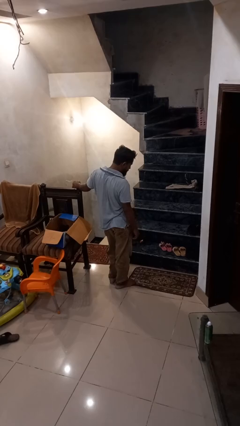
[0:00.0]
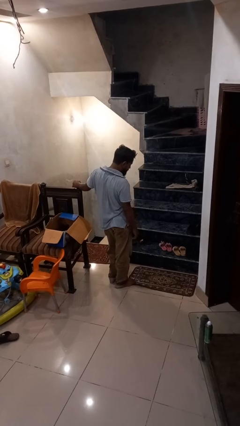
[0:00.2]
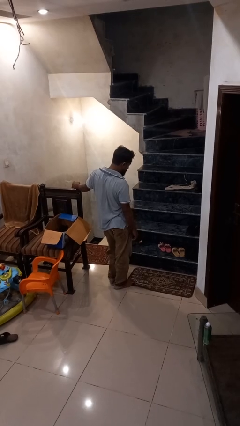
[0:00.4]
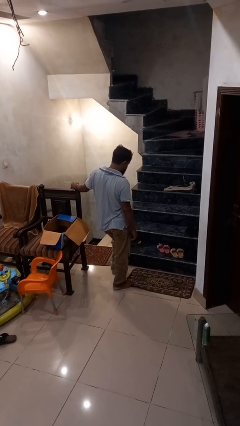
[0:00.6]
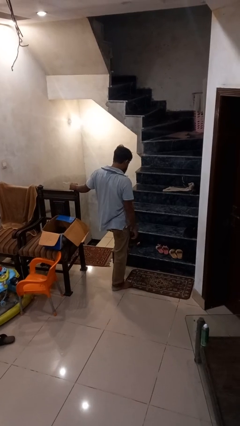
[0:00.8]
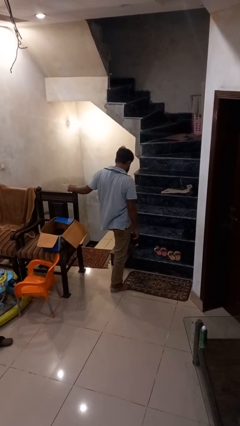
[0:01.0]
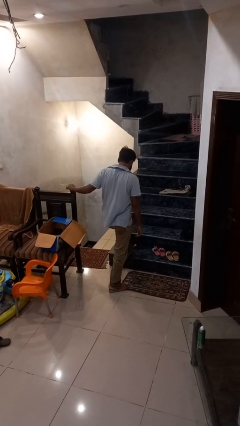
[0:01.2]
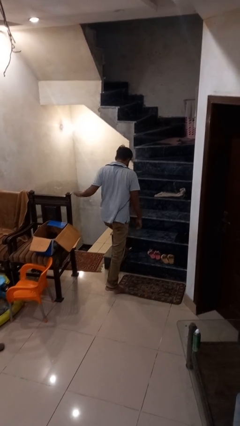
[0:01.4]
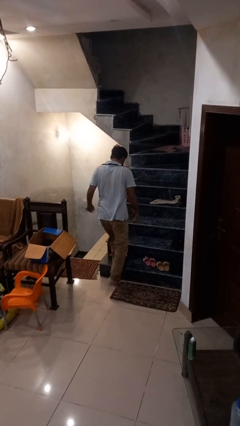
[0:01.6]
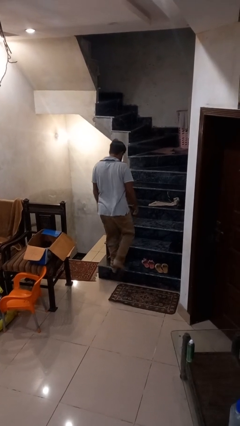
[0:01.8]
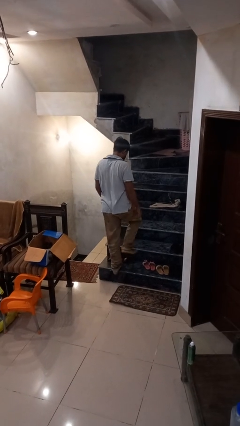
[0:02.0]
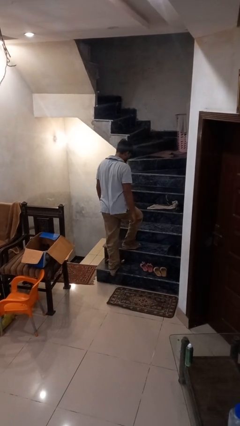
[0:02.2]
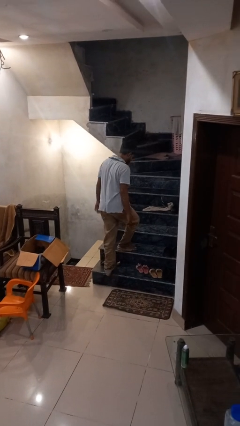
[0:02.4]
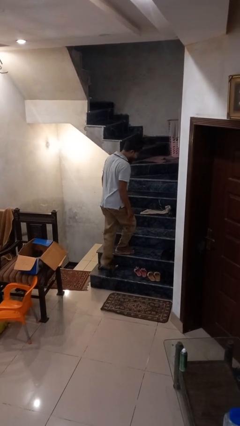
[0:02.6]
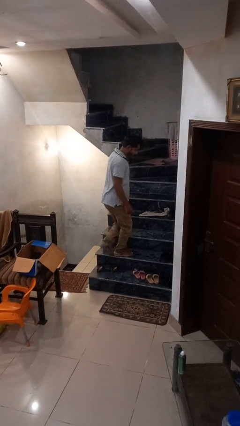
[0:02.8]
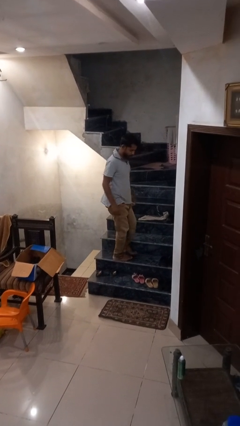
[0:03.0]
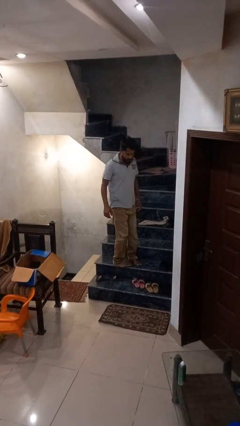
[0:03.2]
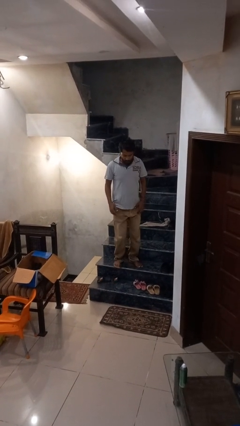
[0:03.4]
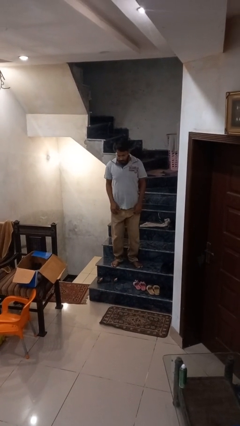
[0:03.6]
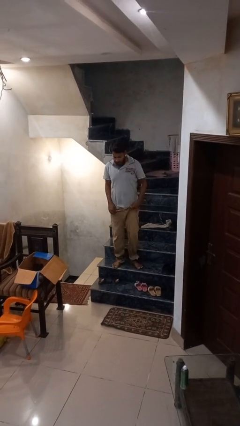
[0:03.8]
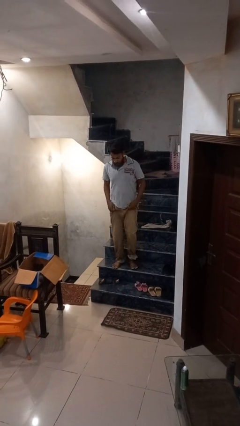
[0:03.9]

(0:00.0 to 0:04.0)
person climbs up stairs

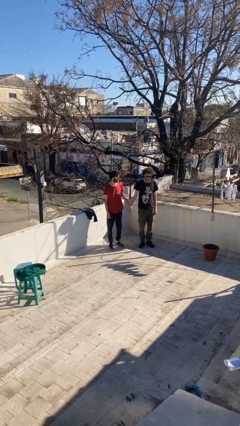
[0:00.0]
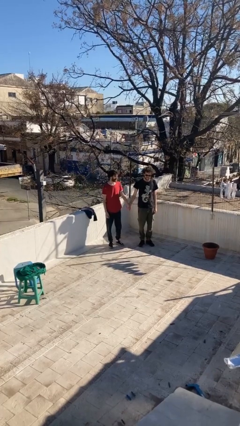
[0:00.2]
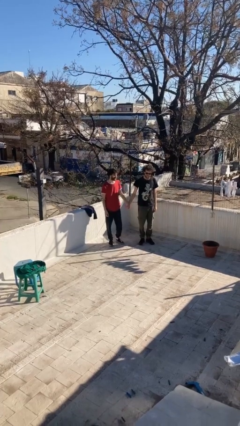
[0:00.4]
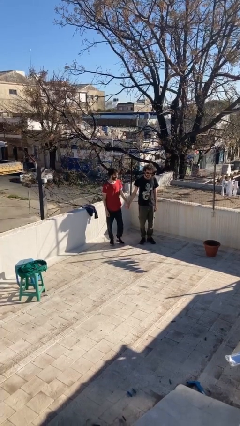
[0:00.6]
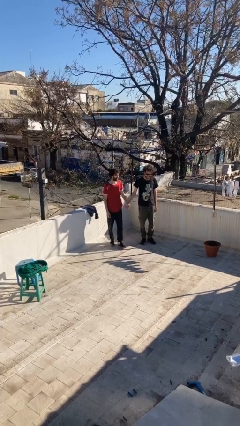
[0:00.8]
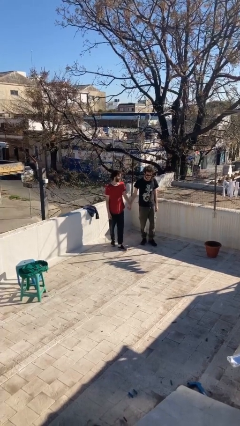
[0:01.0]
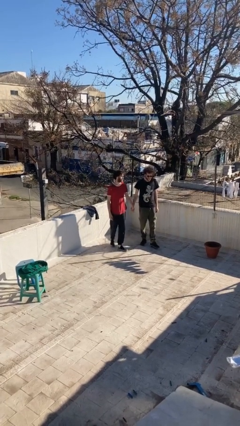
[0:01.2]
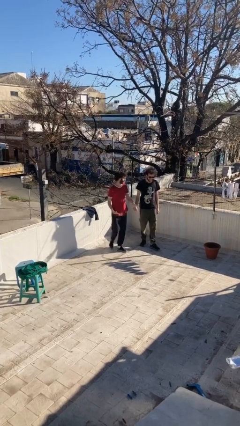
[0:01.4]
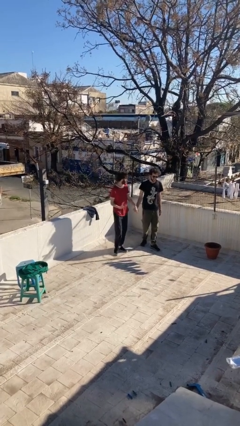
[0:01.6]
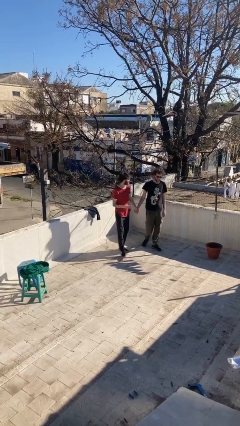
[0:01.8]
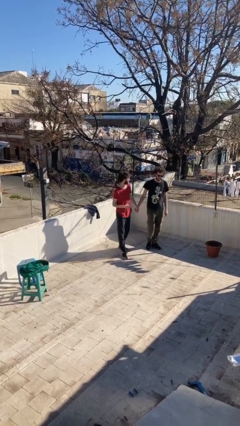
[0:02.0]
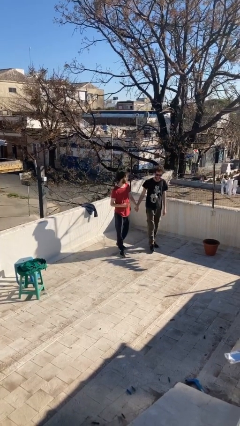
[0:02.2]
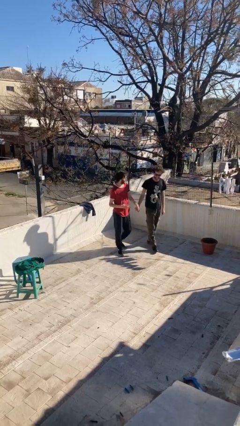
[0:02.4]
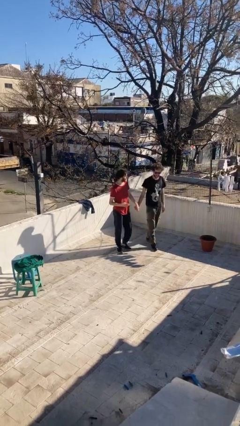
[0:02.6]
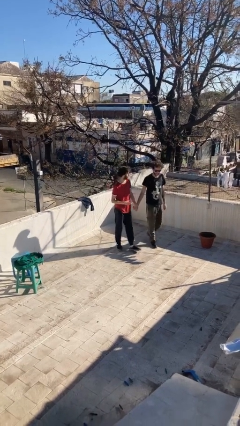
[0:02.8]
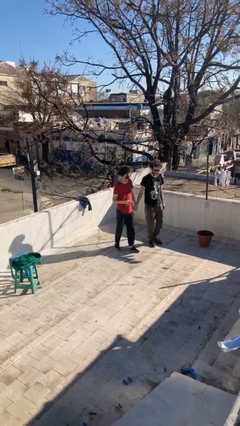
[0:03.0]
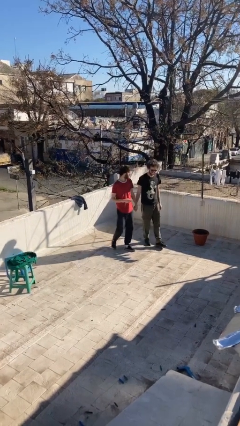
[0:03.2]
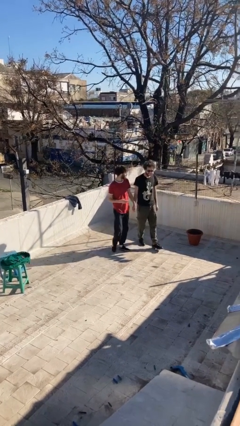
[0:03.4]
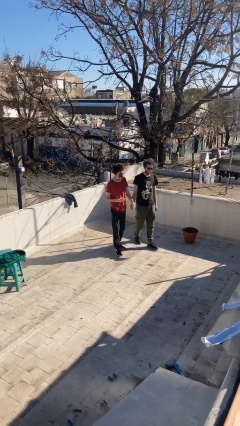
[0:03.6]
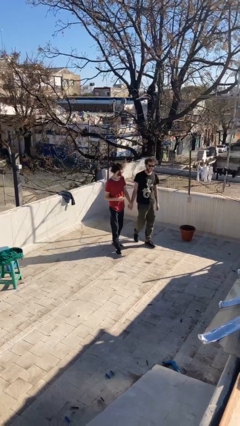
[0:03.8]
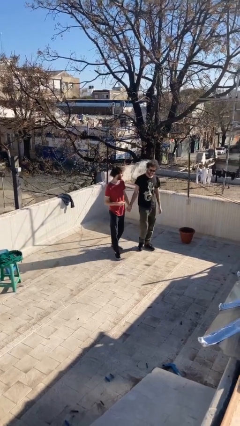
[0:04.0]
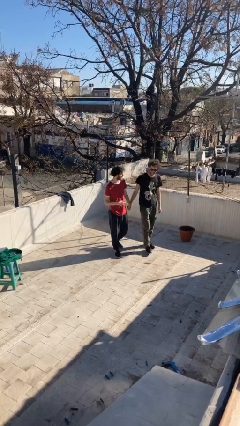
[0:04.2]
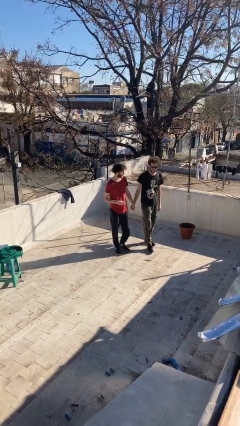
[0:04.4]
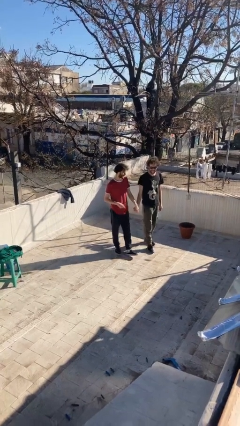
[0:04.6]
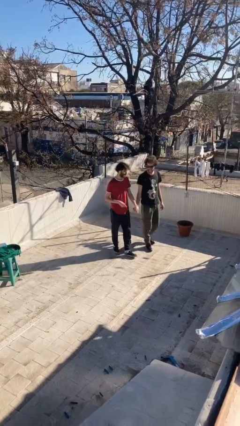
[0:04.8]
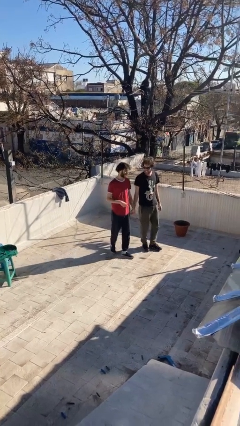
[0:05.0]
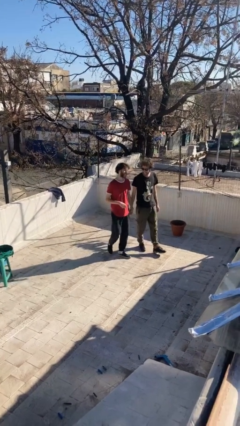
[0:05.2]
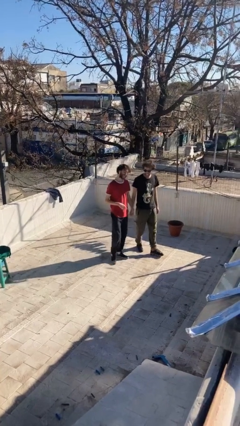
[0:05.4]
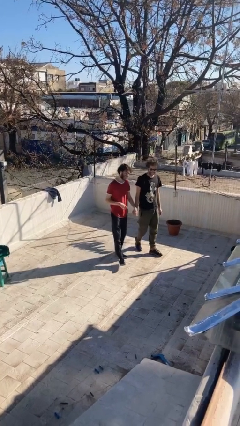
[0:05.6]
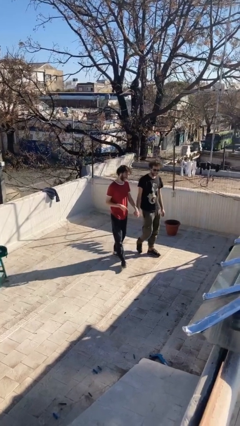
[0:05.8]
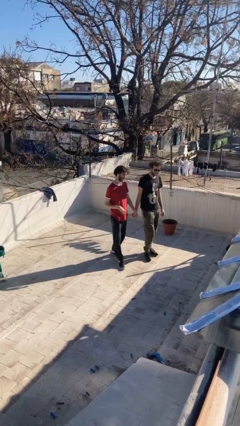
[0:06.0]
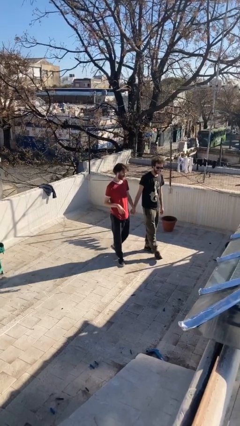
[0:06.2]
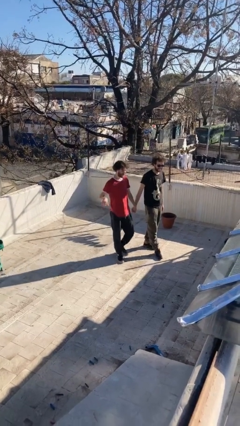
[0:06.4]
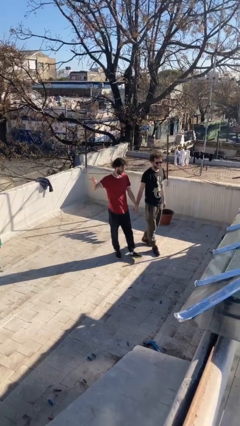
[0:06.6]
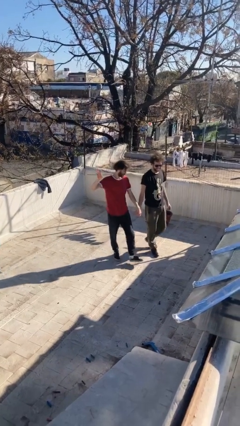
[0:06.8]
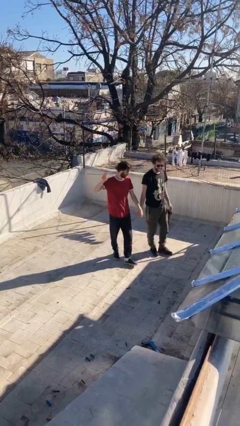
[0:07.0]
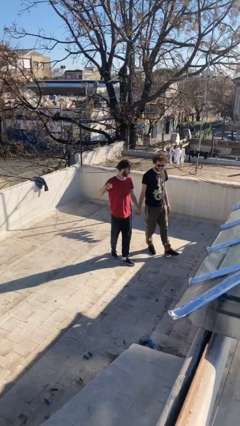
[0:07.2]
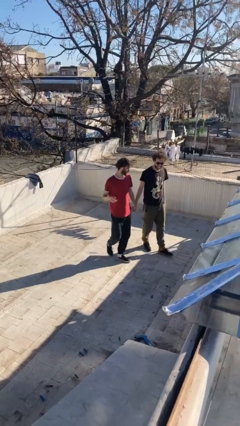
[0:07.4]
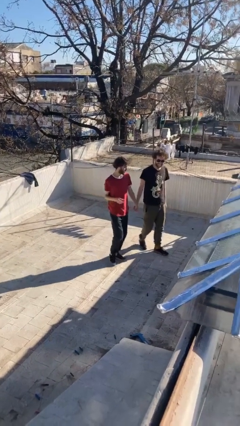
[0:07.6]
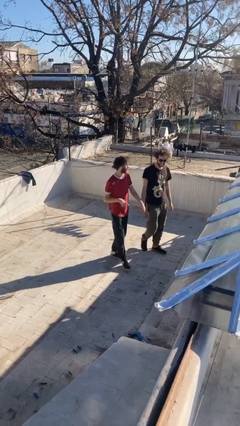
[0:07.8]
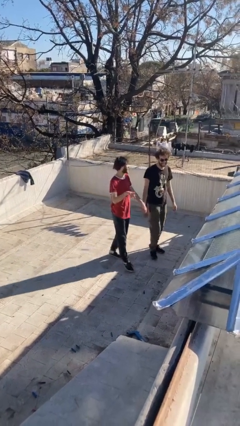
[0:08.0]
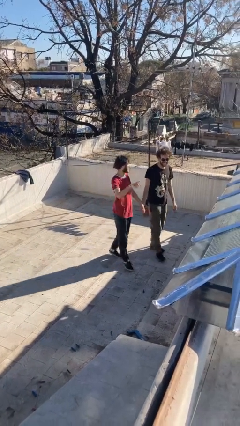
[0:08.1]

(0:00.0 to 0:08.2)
person holds hand

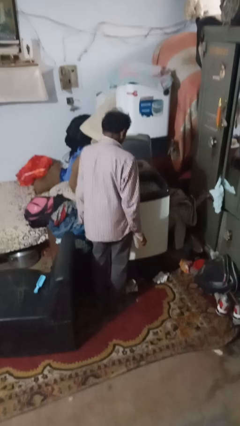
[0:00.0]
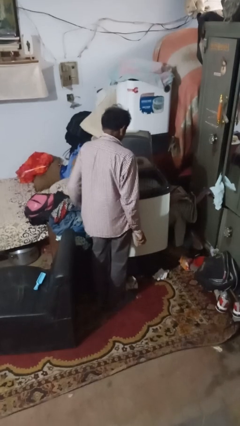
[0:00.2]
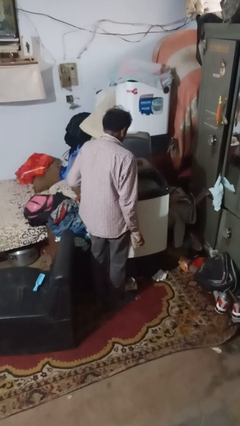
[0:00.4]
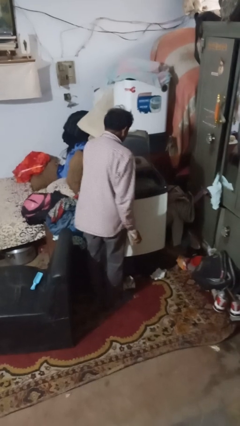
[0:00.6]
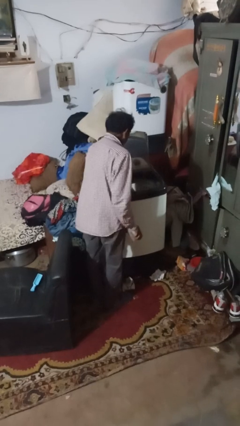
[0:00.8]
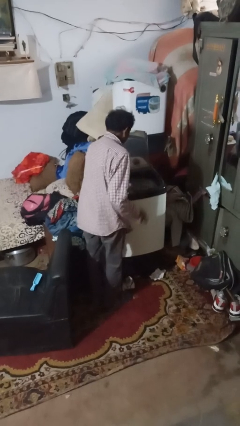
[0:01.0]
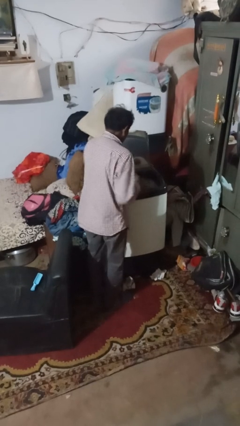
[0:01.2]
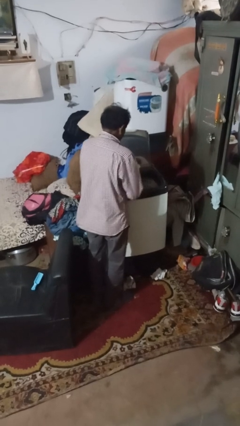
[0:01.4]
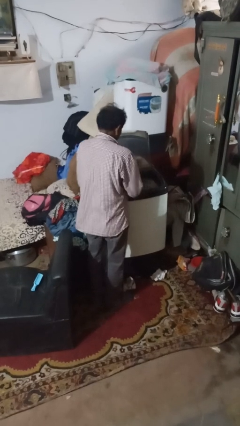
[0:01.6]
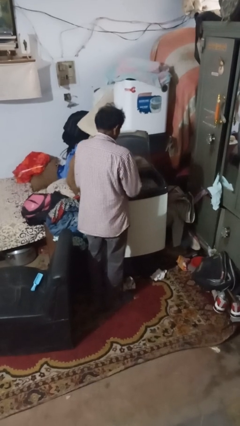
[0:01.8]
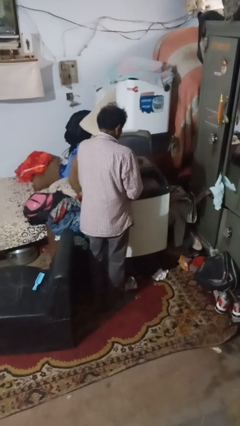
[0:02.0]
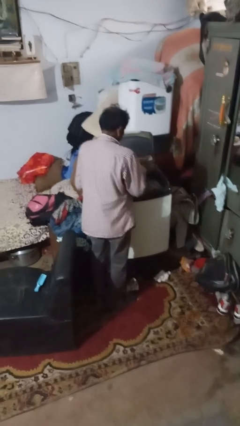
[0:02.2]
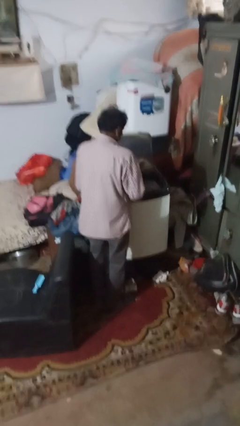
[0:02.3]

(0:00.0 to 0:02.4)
person cleans dryer lint trap

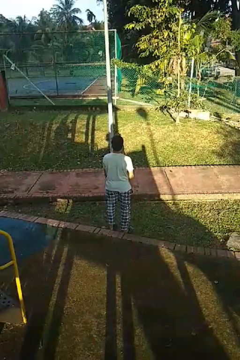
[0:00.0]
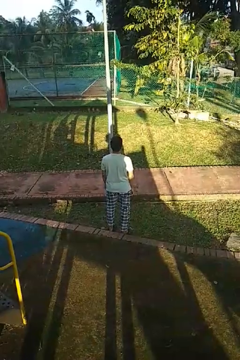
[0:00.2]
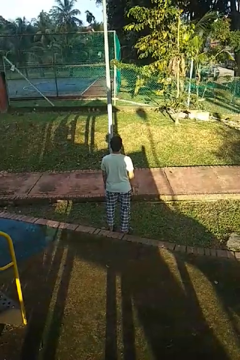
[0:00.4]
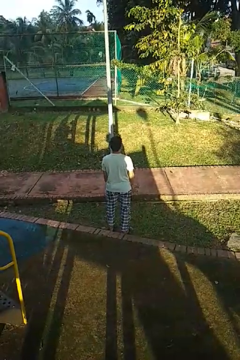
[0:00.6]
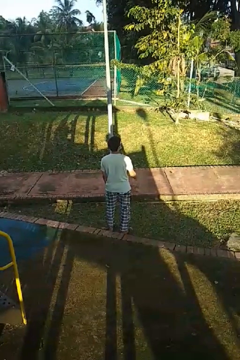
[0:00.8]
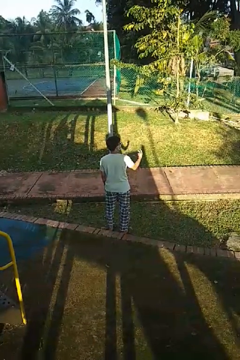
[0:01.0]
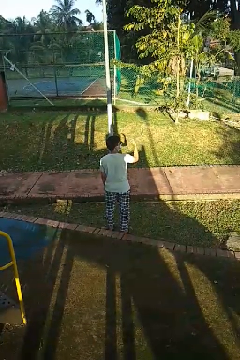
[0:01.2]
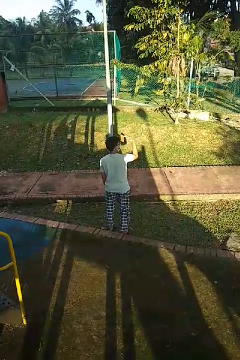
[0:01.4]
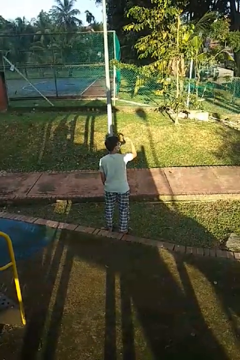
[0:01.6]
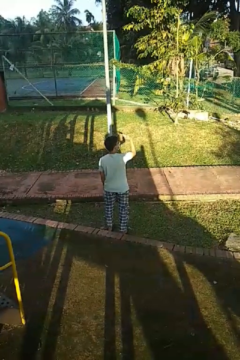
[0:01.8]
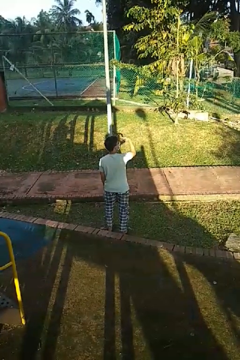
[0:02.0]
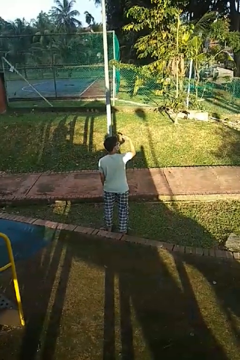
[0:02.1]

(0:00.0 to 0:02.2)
person gestures watch closely

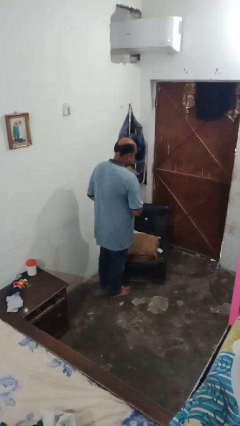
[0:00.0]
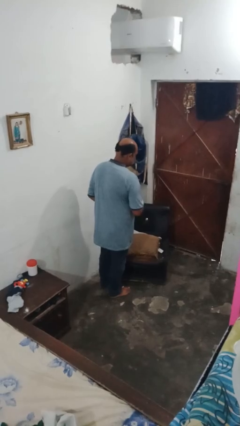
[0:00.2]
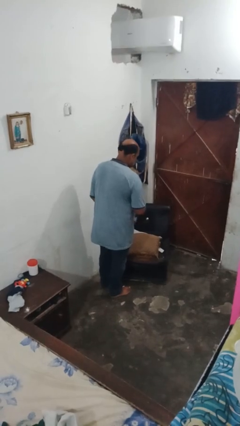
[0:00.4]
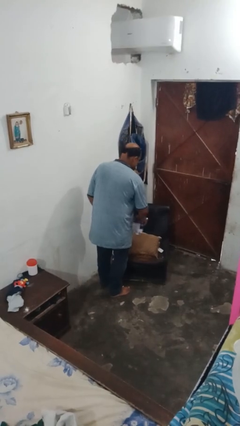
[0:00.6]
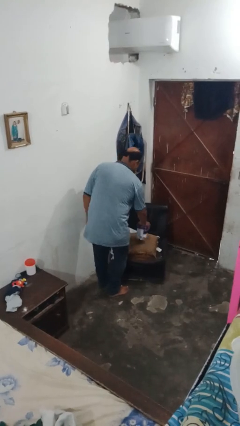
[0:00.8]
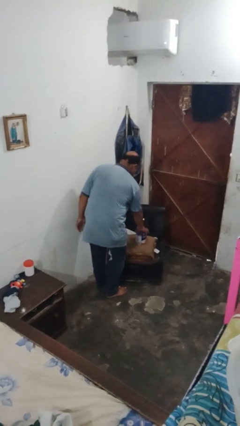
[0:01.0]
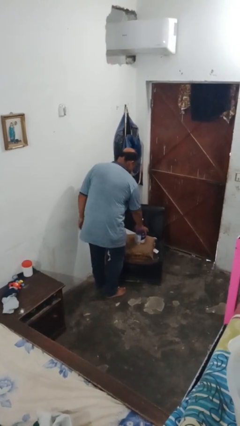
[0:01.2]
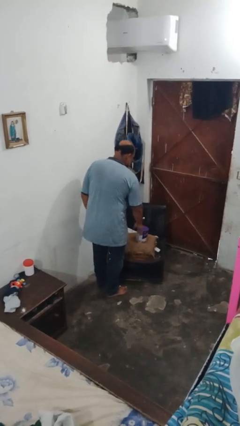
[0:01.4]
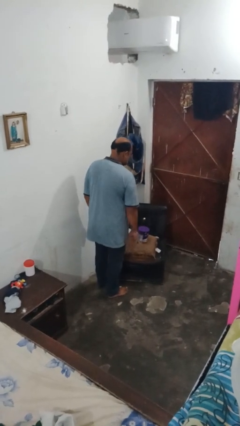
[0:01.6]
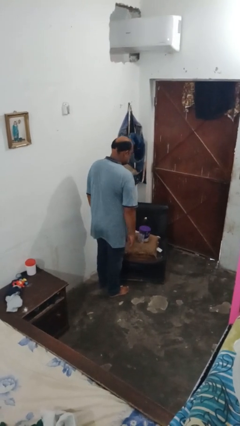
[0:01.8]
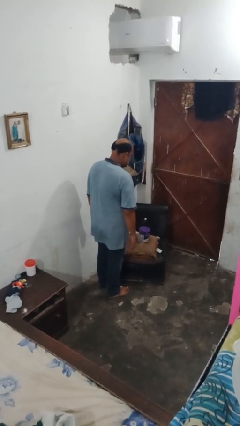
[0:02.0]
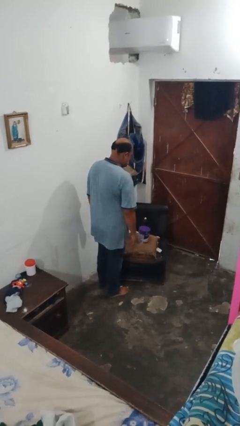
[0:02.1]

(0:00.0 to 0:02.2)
person puts down object on couch
